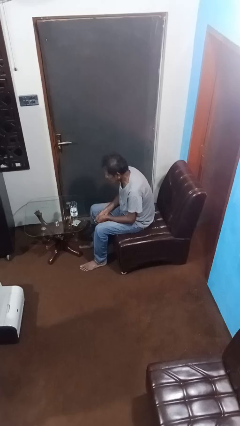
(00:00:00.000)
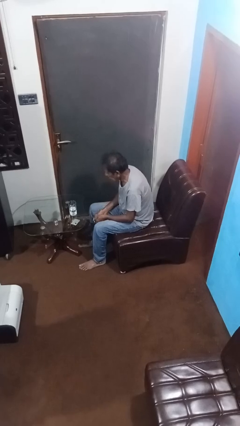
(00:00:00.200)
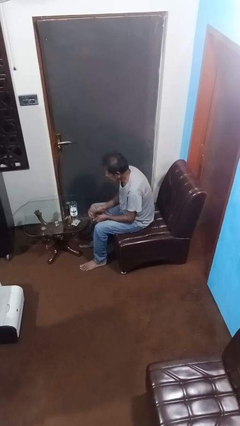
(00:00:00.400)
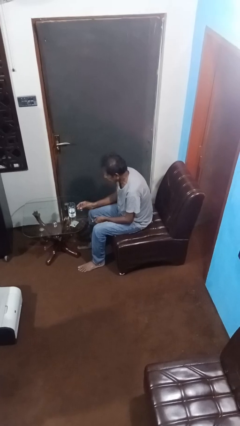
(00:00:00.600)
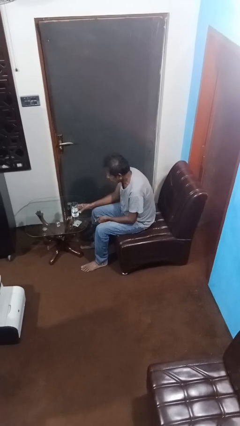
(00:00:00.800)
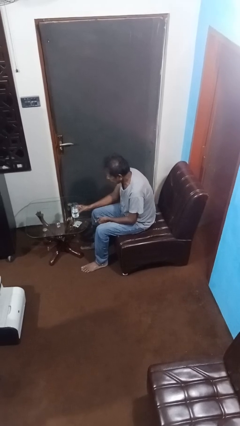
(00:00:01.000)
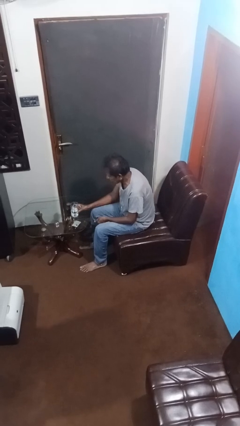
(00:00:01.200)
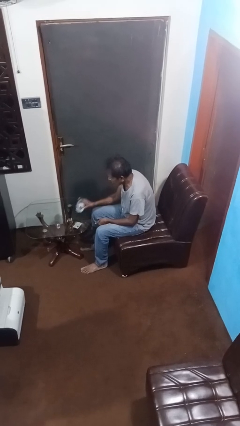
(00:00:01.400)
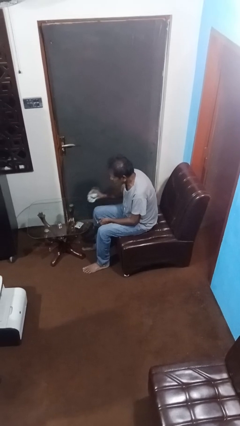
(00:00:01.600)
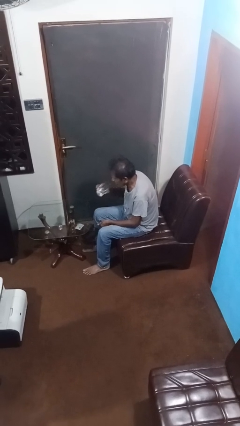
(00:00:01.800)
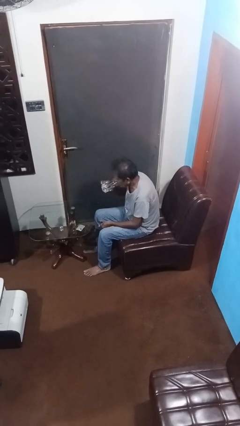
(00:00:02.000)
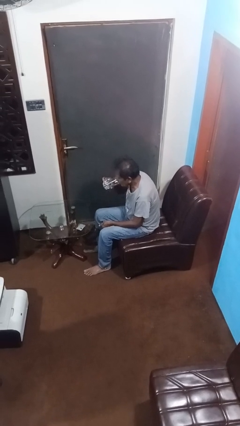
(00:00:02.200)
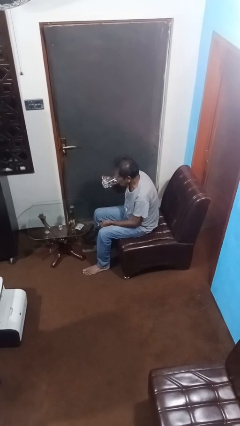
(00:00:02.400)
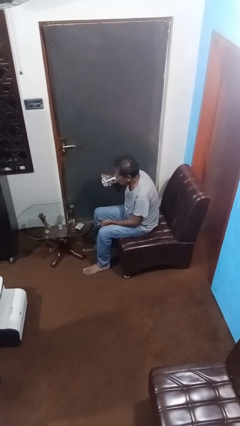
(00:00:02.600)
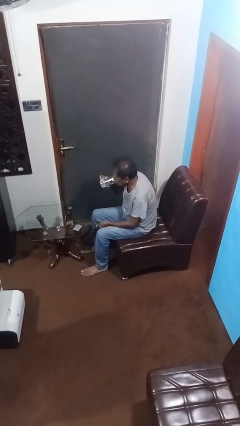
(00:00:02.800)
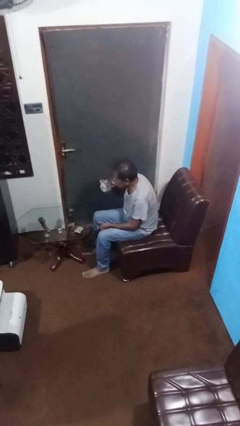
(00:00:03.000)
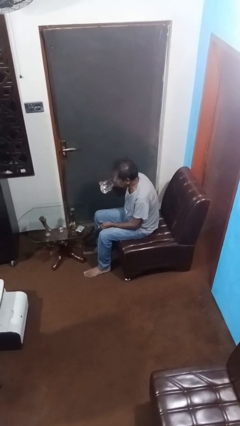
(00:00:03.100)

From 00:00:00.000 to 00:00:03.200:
person drinks from cup

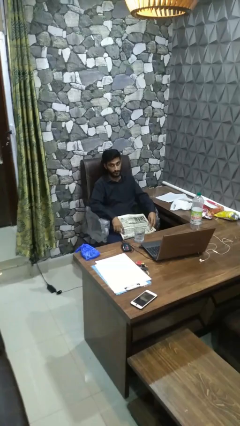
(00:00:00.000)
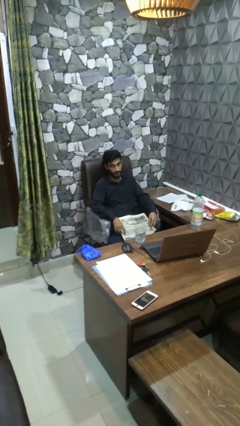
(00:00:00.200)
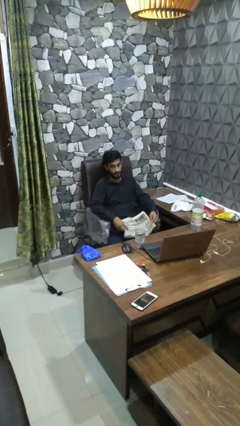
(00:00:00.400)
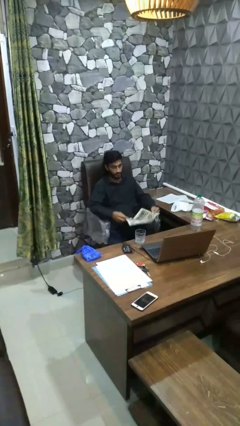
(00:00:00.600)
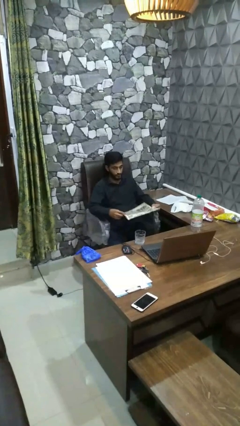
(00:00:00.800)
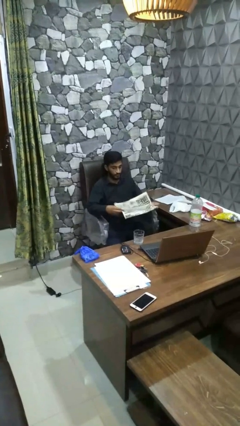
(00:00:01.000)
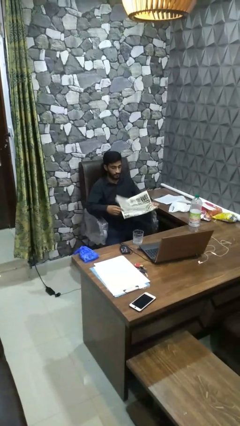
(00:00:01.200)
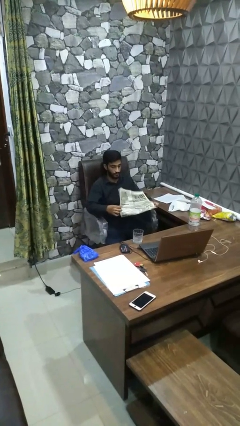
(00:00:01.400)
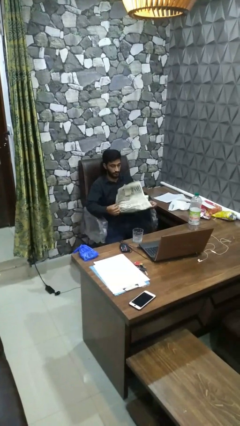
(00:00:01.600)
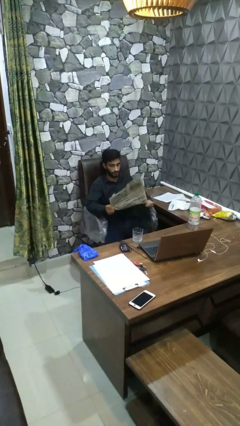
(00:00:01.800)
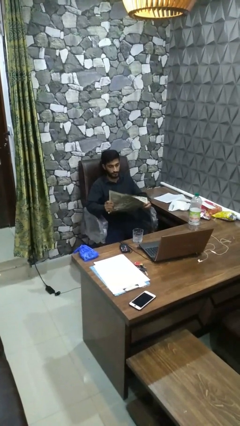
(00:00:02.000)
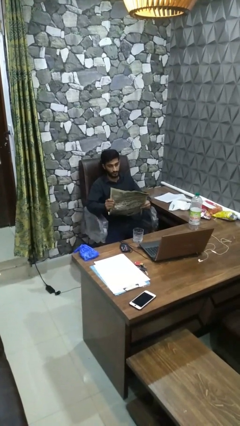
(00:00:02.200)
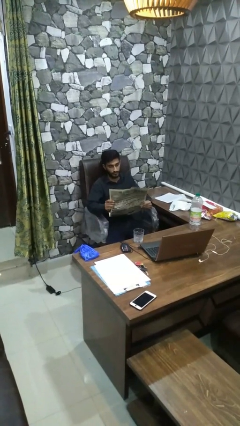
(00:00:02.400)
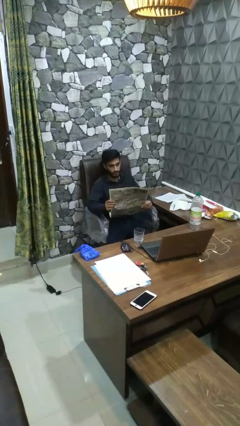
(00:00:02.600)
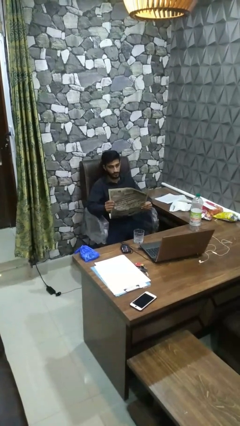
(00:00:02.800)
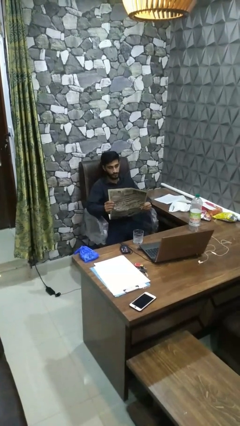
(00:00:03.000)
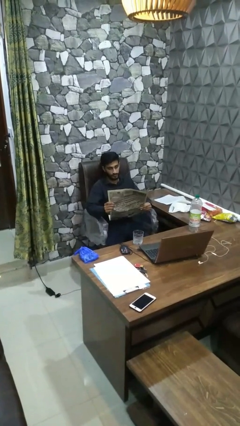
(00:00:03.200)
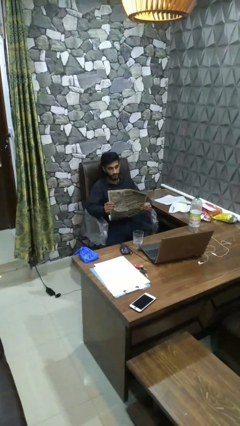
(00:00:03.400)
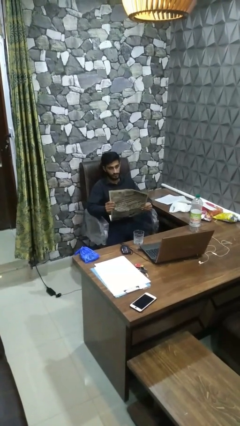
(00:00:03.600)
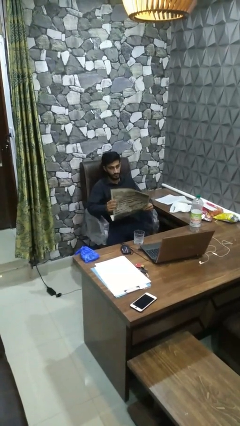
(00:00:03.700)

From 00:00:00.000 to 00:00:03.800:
person reads newspaper

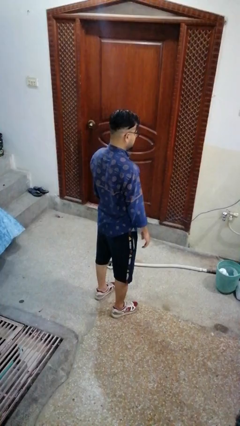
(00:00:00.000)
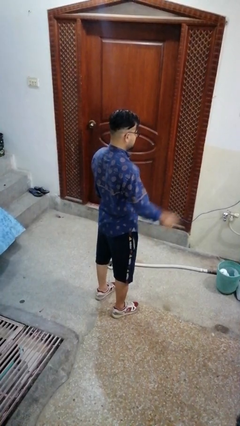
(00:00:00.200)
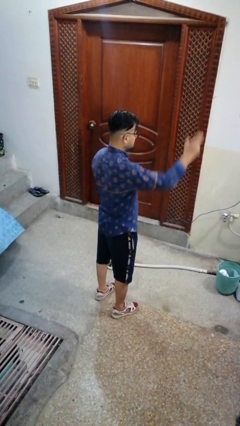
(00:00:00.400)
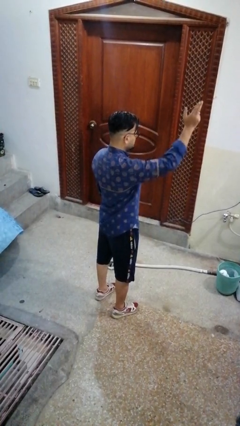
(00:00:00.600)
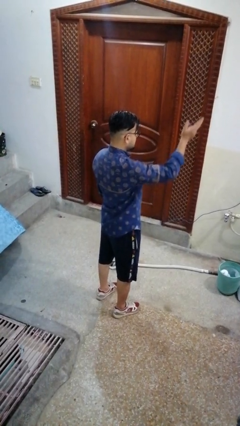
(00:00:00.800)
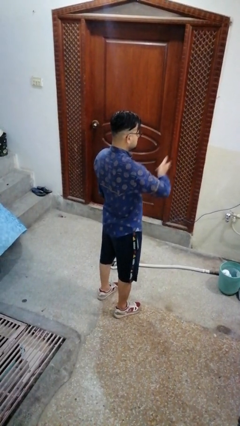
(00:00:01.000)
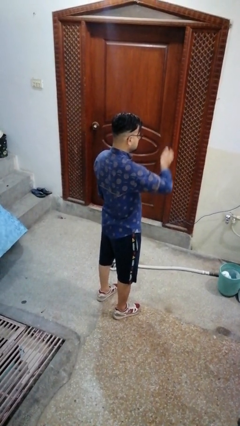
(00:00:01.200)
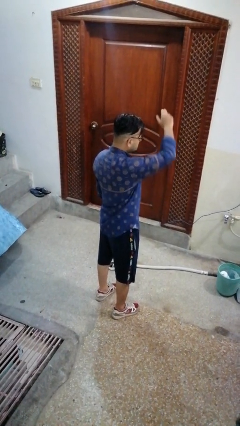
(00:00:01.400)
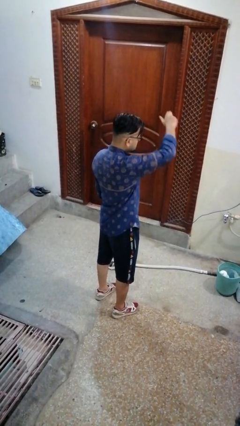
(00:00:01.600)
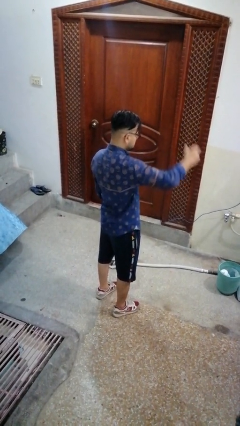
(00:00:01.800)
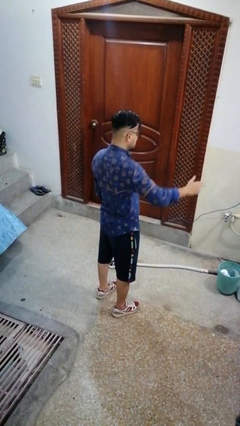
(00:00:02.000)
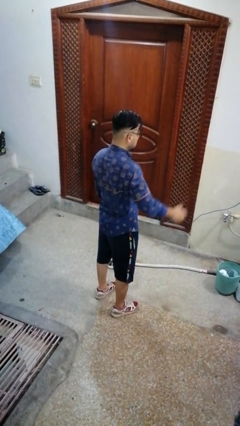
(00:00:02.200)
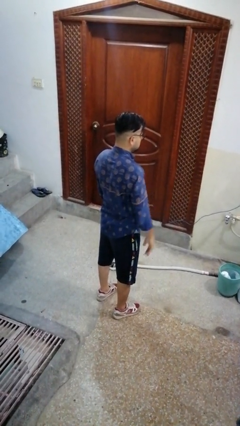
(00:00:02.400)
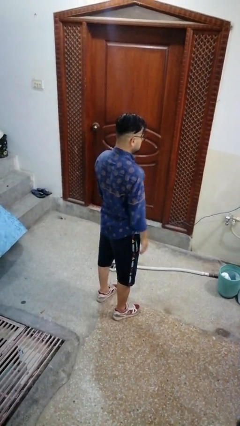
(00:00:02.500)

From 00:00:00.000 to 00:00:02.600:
person gestures cut

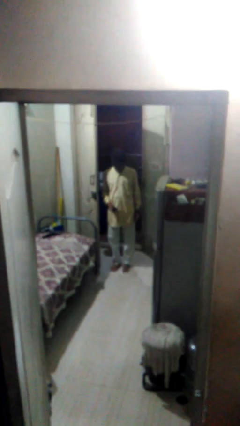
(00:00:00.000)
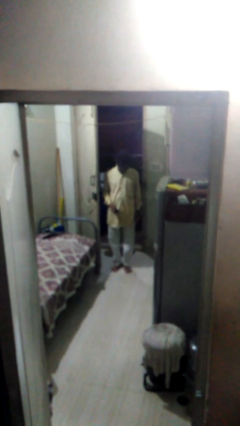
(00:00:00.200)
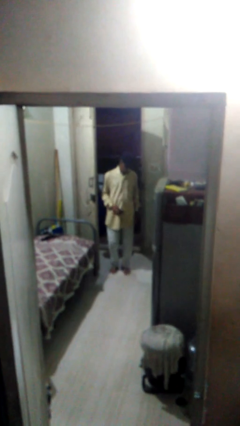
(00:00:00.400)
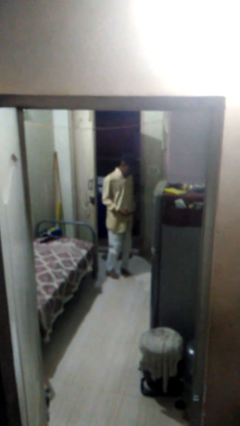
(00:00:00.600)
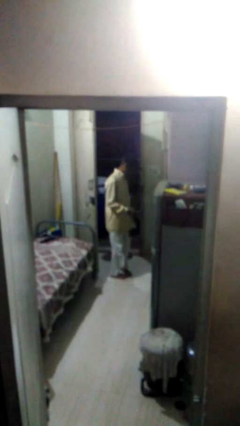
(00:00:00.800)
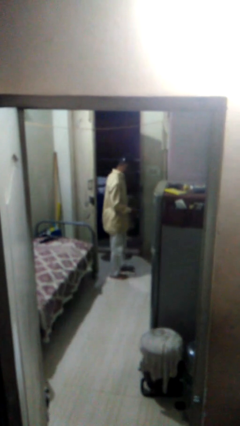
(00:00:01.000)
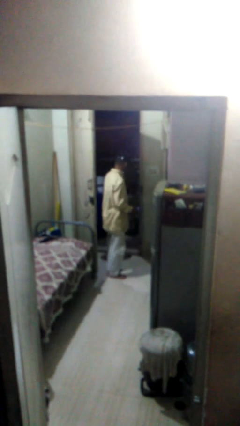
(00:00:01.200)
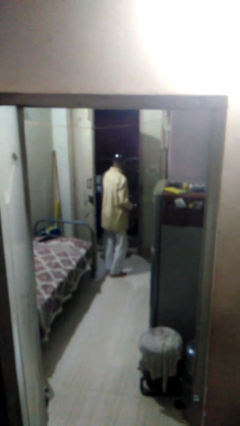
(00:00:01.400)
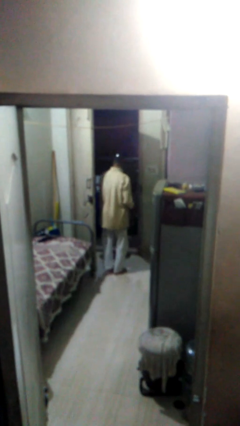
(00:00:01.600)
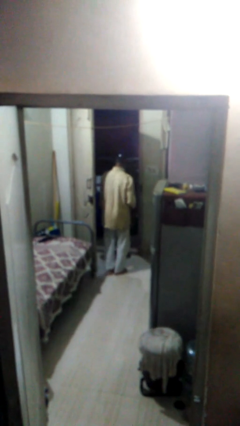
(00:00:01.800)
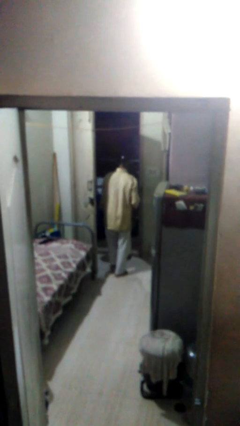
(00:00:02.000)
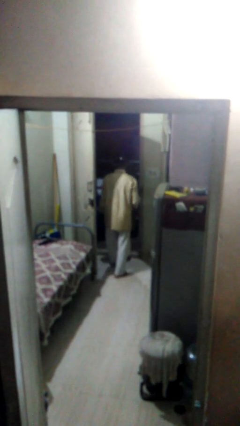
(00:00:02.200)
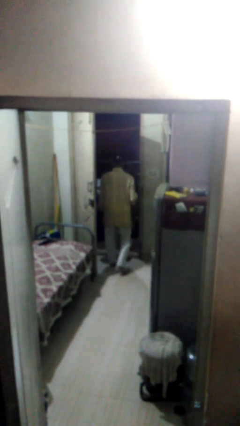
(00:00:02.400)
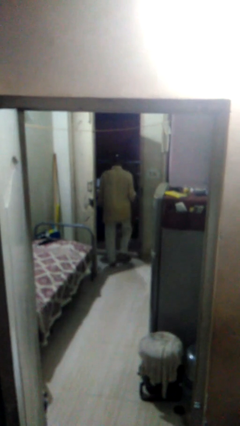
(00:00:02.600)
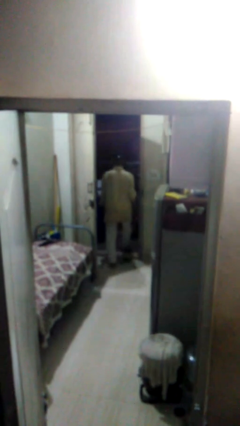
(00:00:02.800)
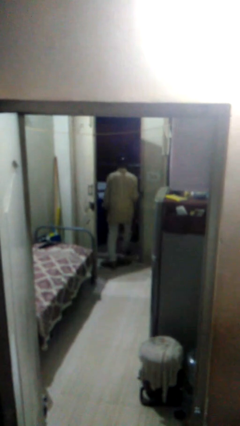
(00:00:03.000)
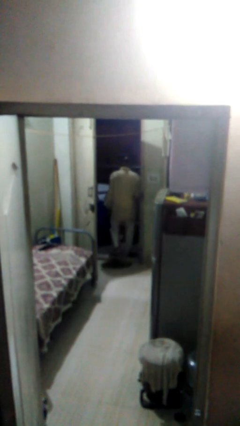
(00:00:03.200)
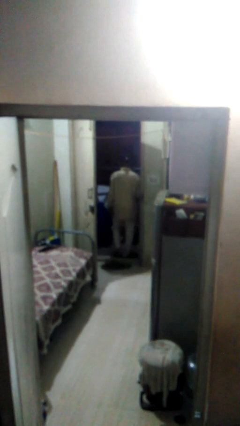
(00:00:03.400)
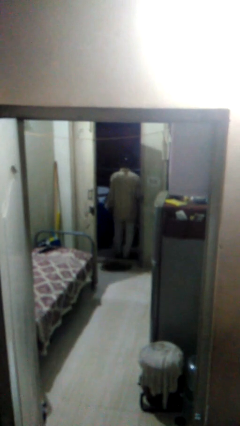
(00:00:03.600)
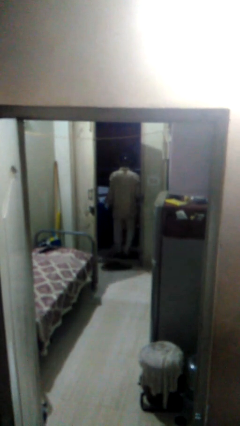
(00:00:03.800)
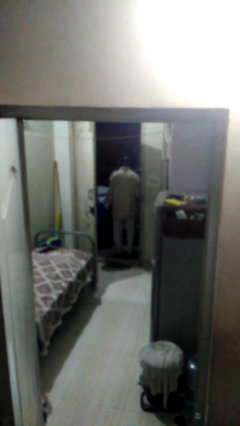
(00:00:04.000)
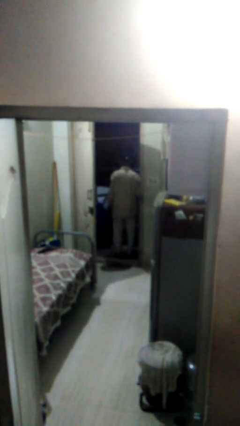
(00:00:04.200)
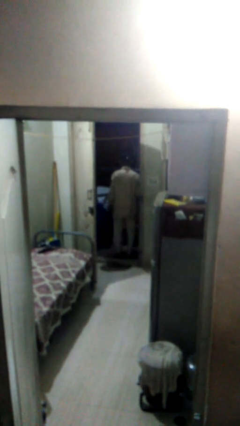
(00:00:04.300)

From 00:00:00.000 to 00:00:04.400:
person exits scene through structure

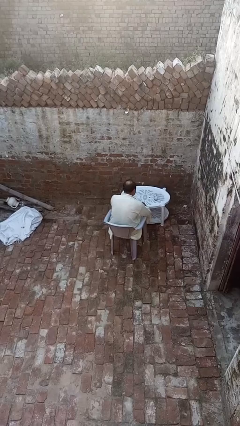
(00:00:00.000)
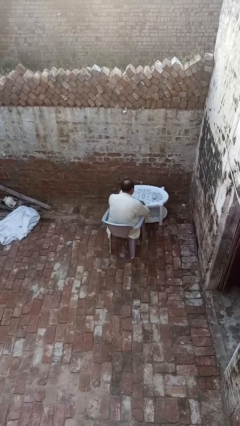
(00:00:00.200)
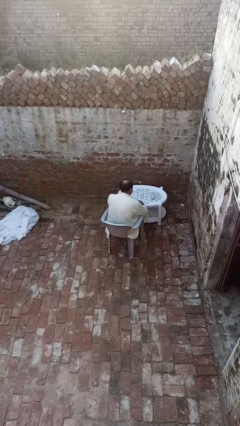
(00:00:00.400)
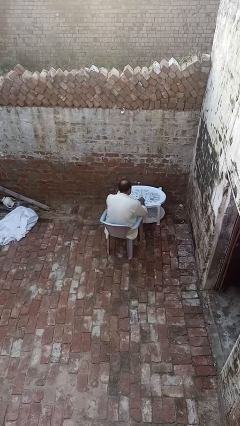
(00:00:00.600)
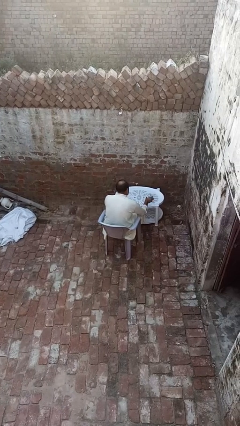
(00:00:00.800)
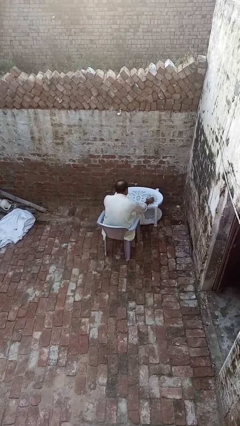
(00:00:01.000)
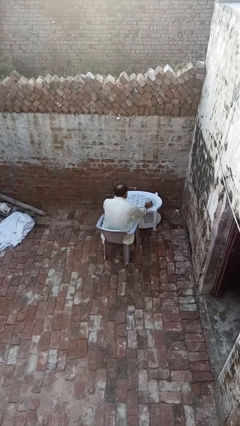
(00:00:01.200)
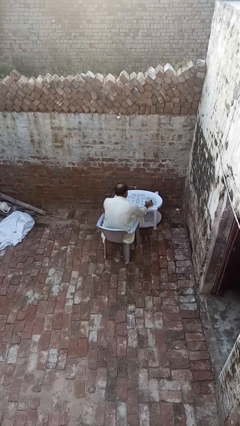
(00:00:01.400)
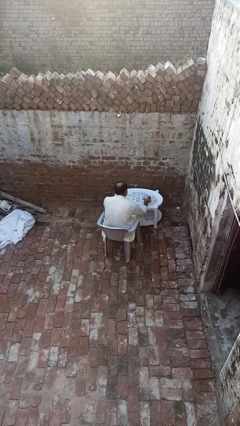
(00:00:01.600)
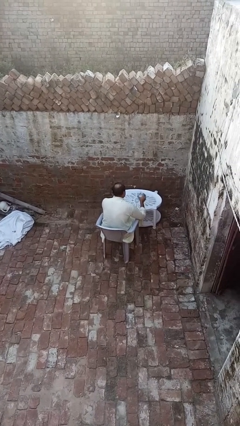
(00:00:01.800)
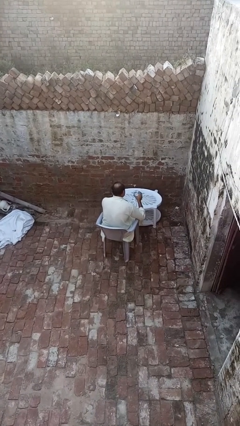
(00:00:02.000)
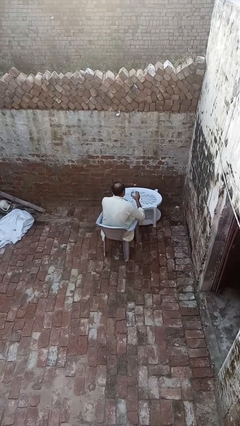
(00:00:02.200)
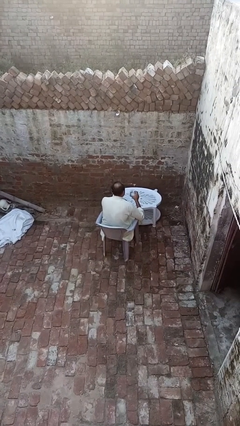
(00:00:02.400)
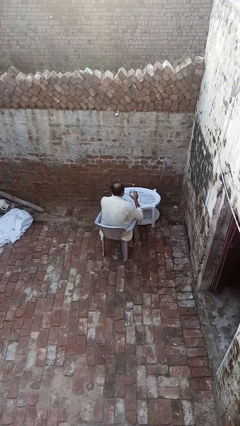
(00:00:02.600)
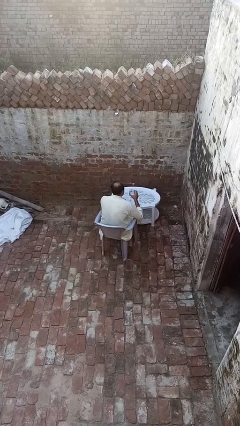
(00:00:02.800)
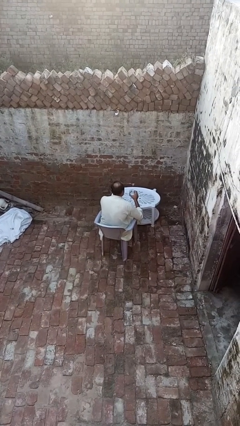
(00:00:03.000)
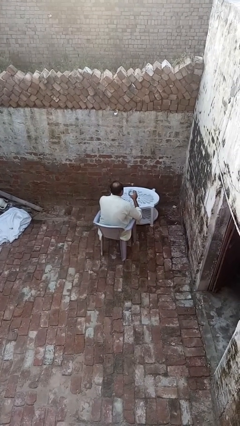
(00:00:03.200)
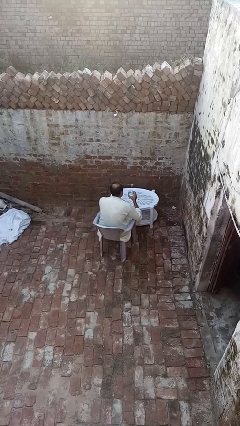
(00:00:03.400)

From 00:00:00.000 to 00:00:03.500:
person picks up object from table
